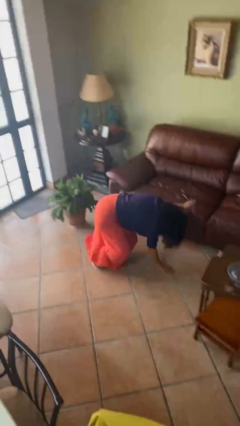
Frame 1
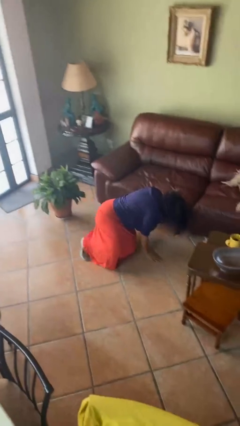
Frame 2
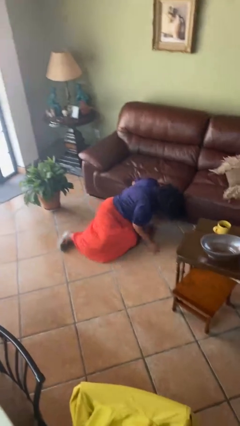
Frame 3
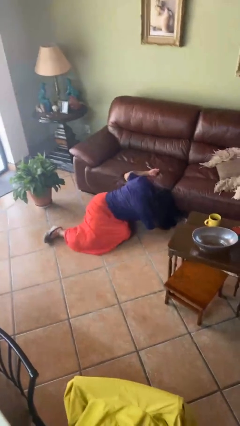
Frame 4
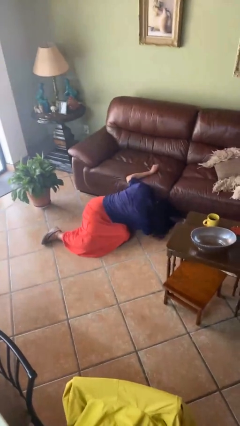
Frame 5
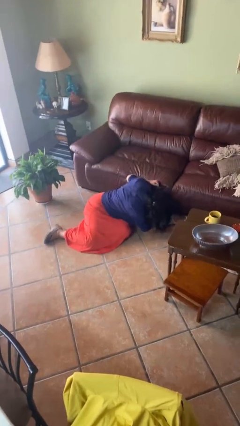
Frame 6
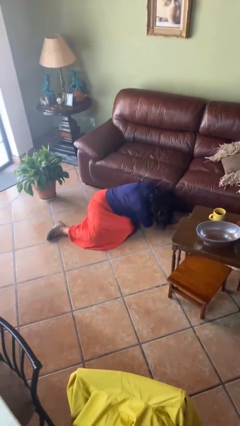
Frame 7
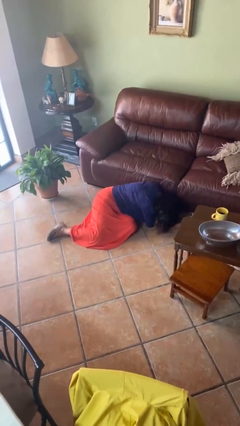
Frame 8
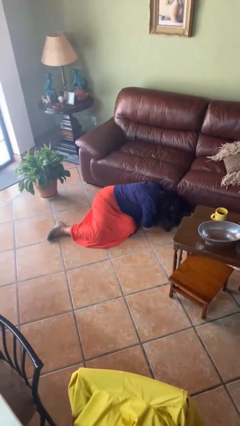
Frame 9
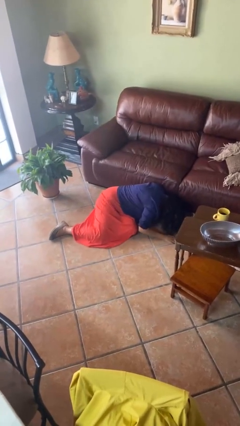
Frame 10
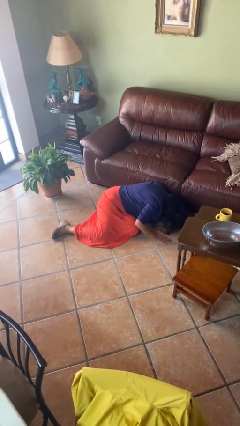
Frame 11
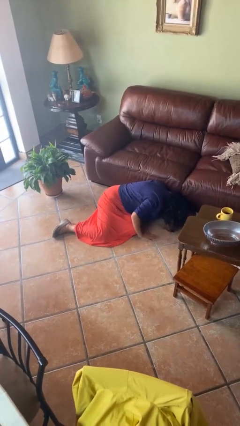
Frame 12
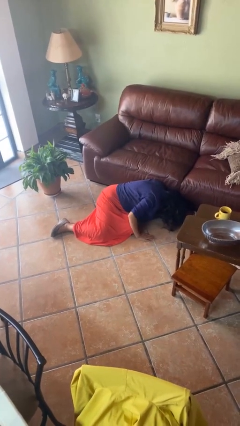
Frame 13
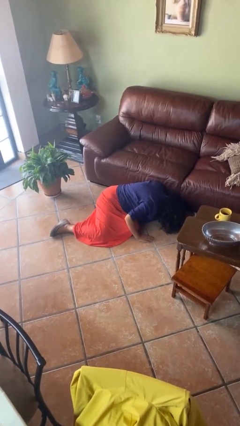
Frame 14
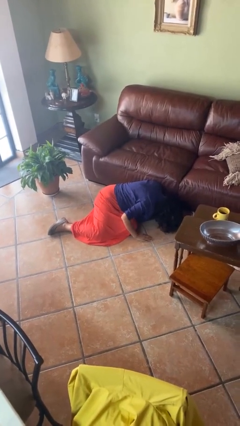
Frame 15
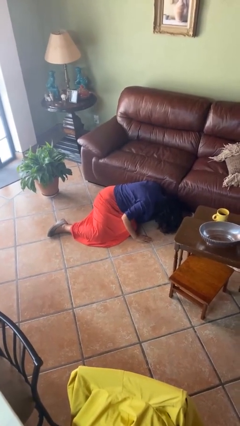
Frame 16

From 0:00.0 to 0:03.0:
person lies down on floor

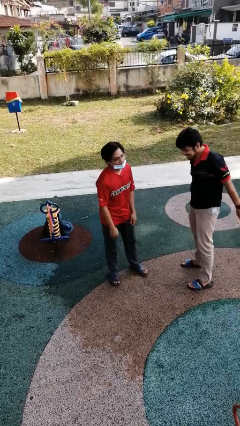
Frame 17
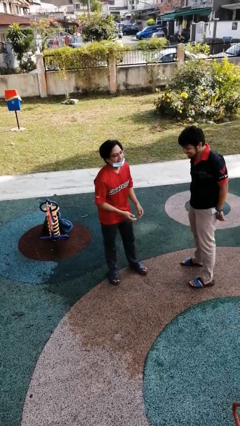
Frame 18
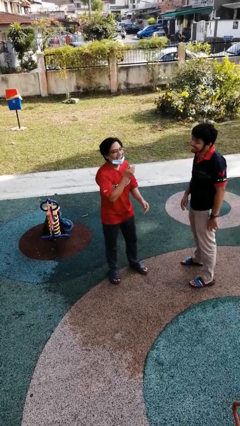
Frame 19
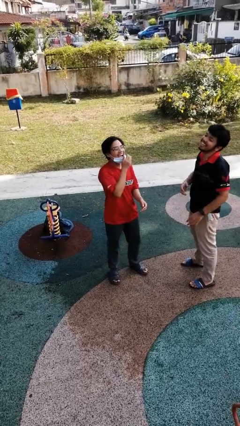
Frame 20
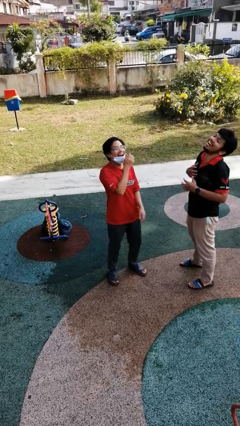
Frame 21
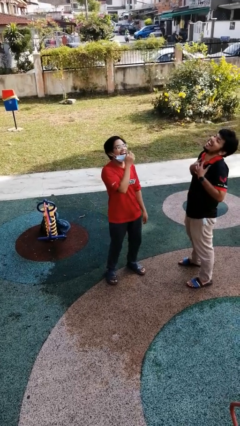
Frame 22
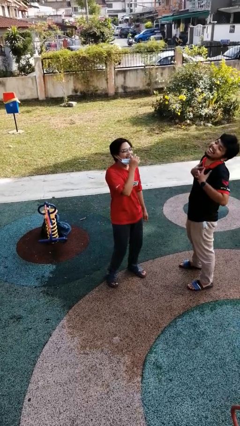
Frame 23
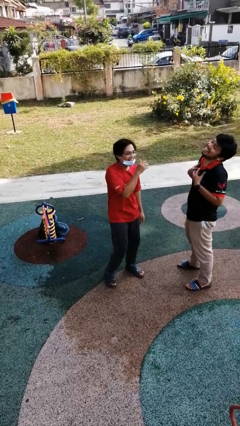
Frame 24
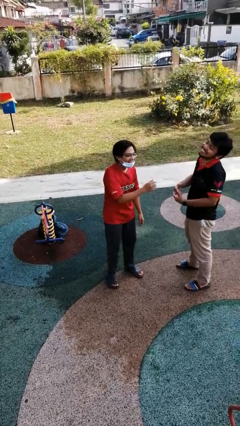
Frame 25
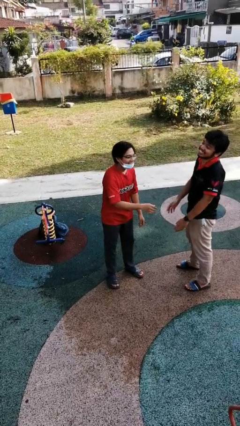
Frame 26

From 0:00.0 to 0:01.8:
person laughs with person

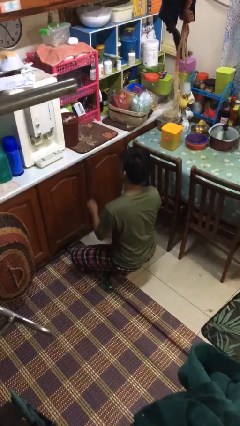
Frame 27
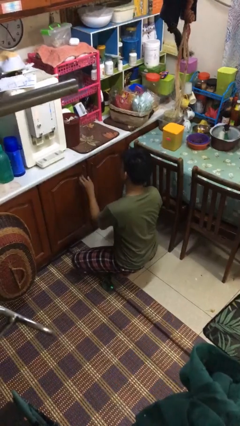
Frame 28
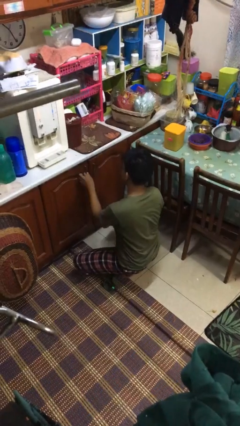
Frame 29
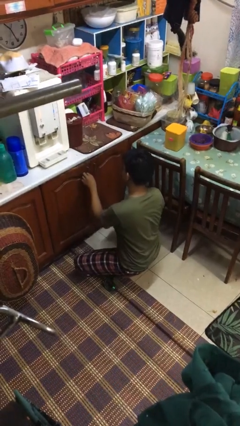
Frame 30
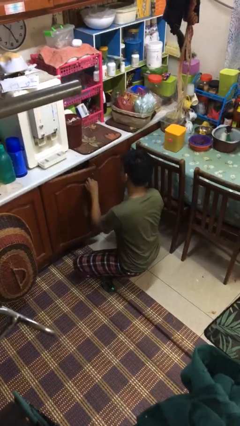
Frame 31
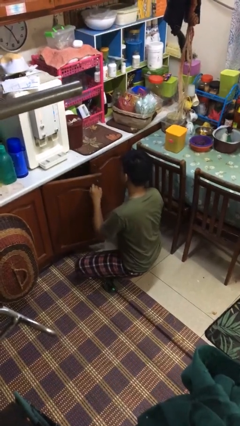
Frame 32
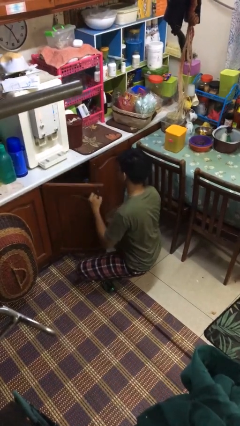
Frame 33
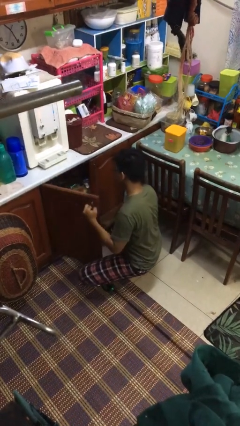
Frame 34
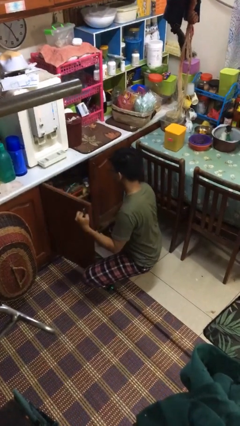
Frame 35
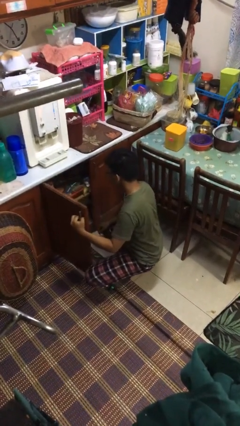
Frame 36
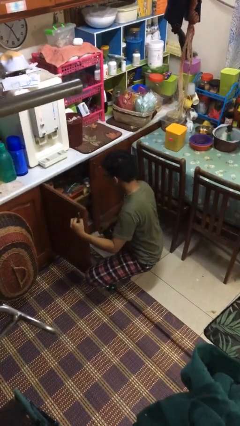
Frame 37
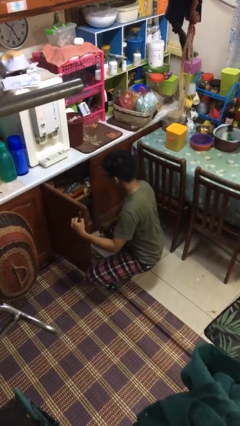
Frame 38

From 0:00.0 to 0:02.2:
person opens kitchen drawer

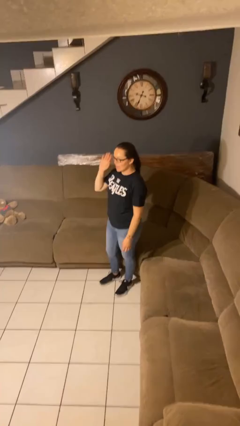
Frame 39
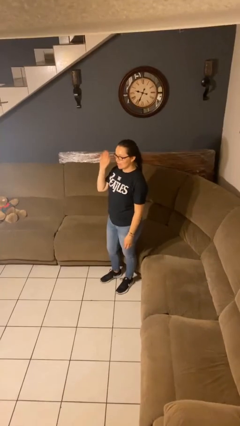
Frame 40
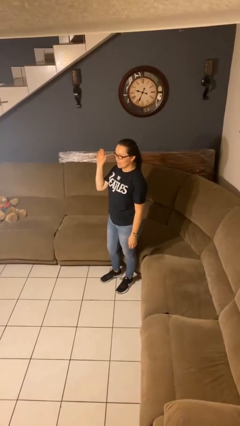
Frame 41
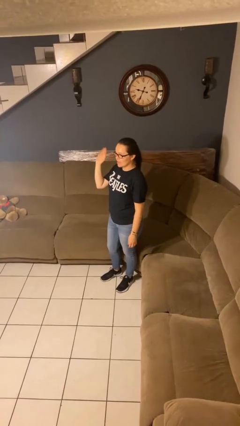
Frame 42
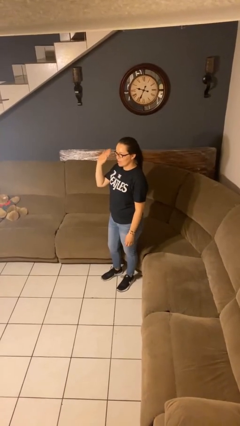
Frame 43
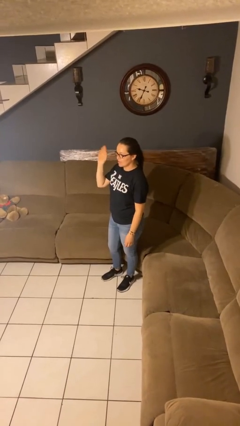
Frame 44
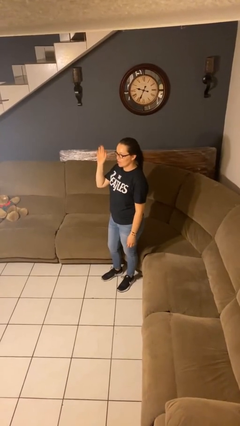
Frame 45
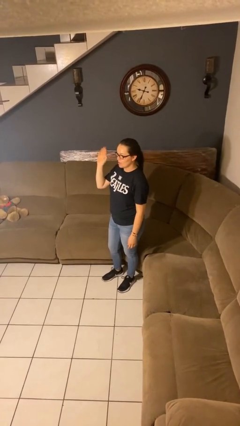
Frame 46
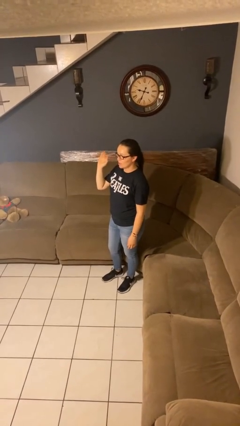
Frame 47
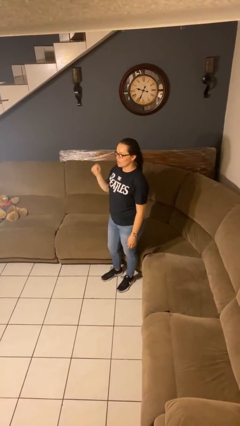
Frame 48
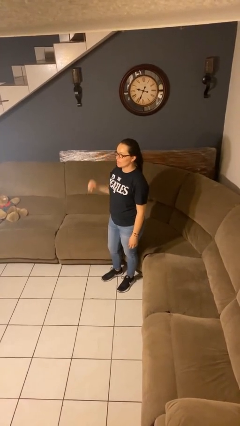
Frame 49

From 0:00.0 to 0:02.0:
person waves at person

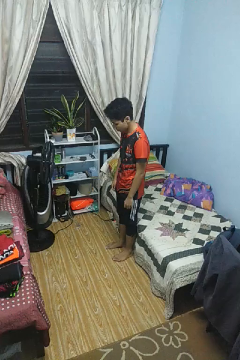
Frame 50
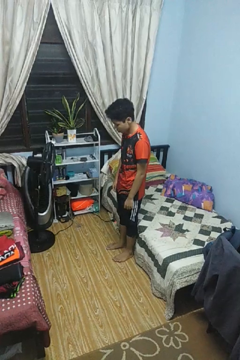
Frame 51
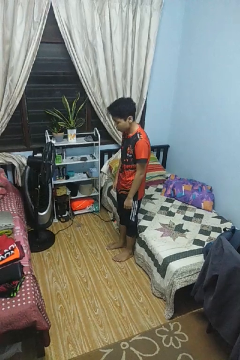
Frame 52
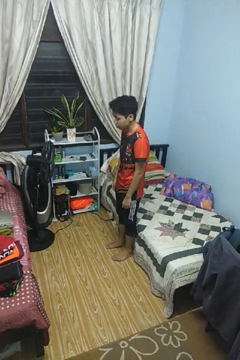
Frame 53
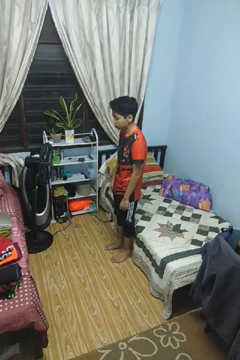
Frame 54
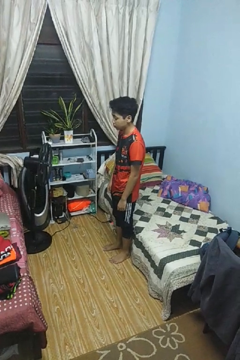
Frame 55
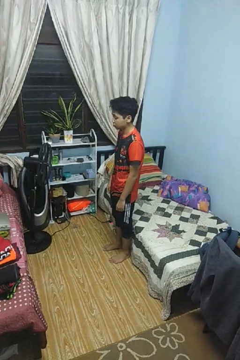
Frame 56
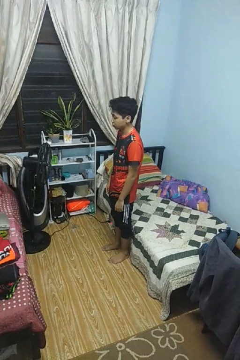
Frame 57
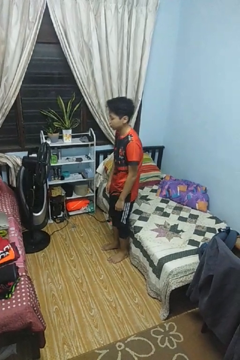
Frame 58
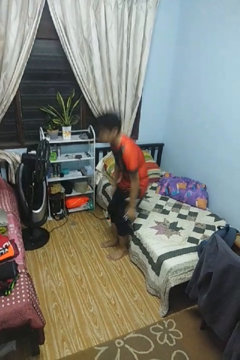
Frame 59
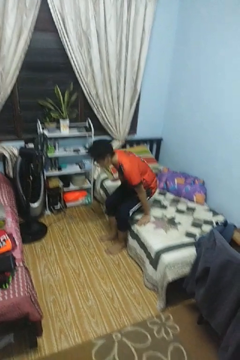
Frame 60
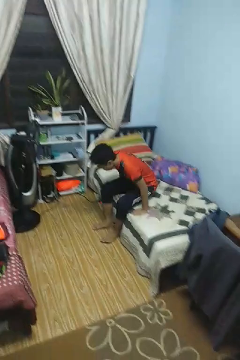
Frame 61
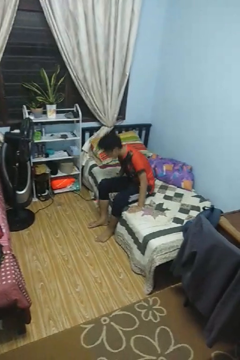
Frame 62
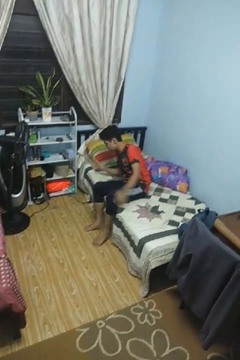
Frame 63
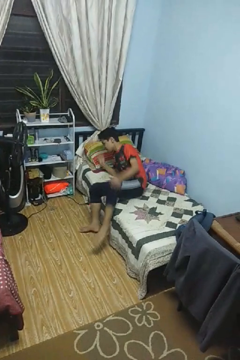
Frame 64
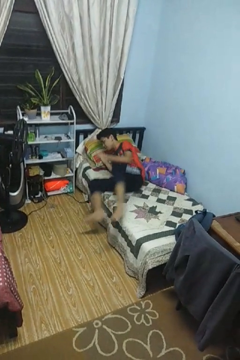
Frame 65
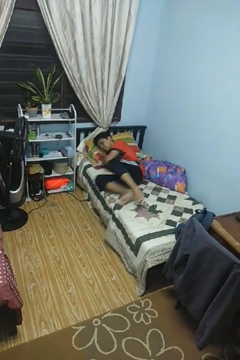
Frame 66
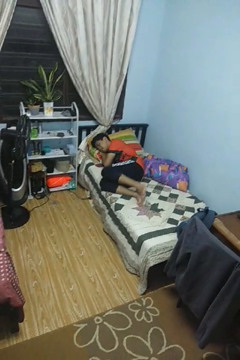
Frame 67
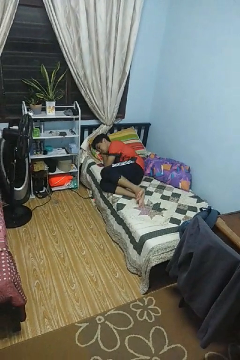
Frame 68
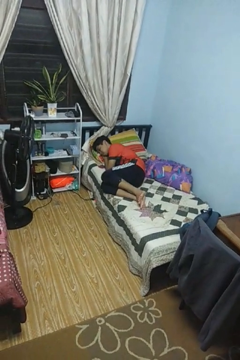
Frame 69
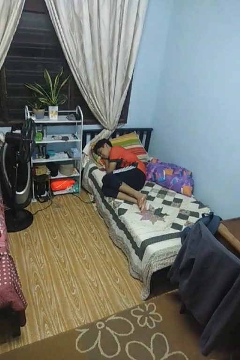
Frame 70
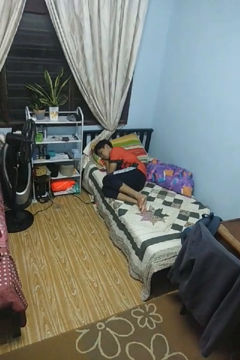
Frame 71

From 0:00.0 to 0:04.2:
person lies down on bed

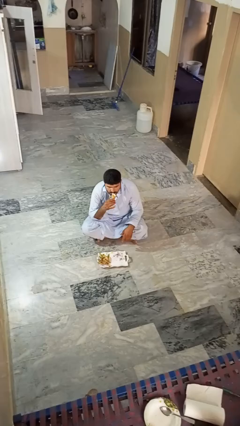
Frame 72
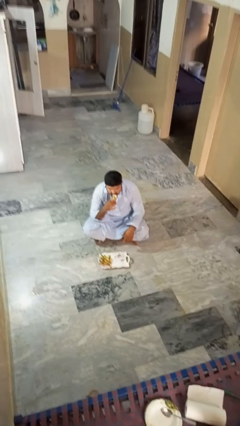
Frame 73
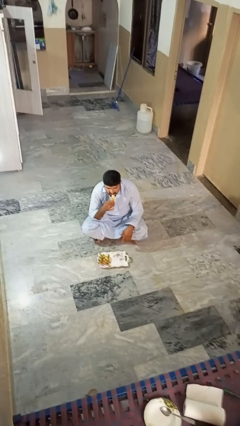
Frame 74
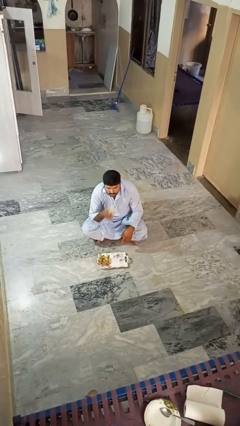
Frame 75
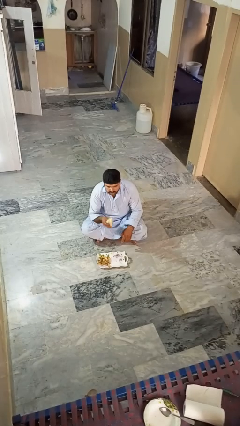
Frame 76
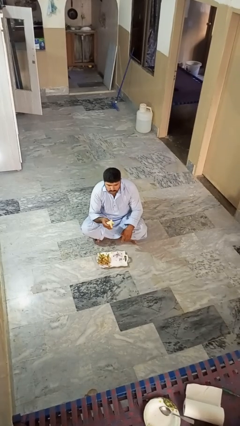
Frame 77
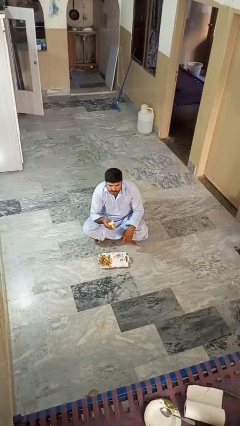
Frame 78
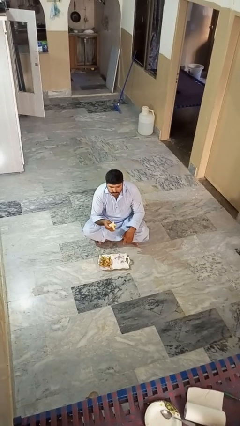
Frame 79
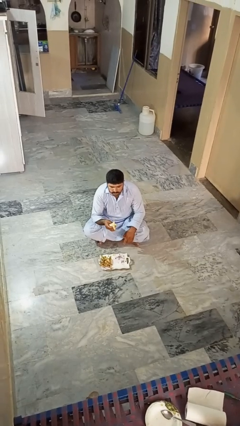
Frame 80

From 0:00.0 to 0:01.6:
person eats banana

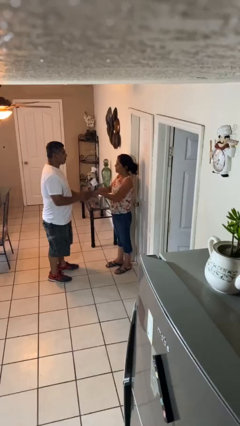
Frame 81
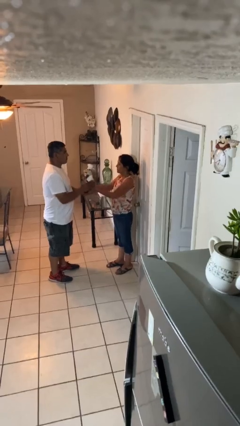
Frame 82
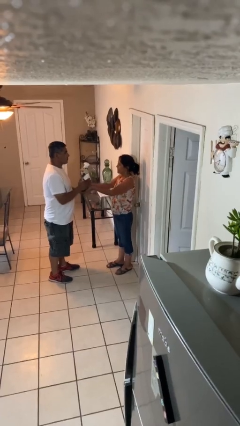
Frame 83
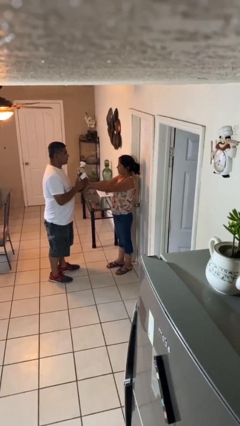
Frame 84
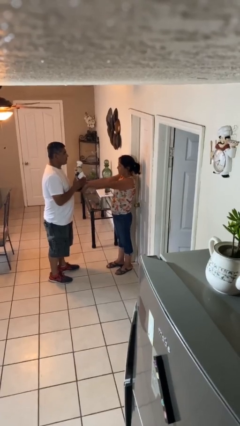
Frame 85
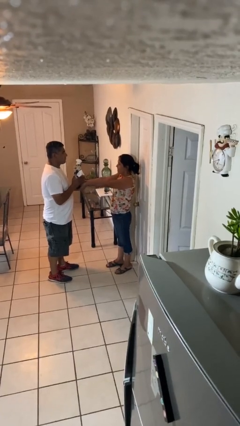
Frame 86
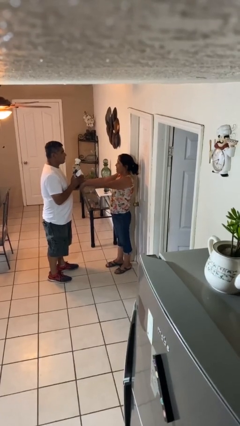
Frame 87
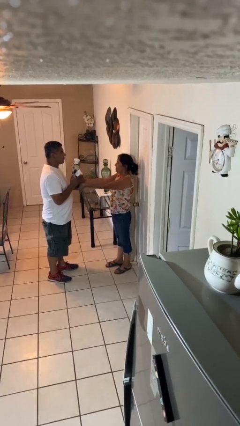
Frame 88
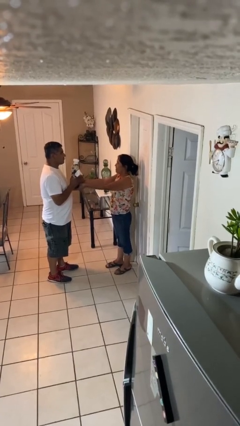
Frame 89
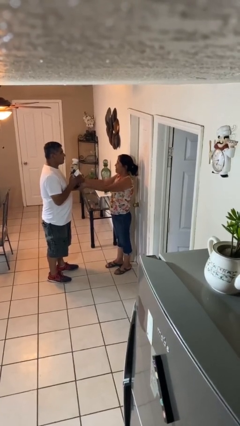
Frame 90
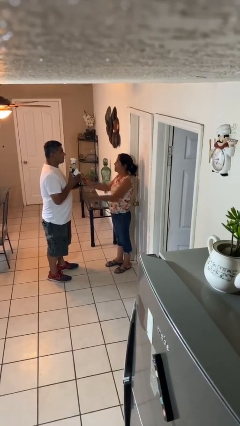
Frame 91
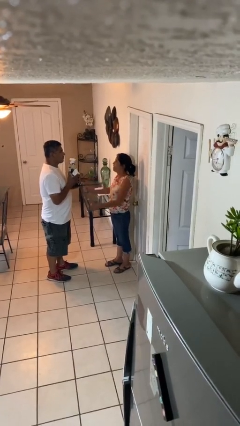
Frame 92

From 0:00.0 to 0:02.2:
person transfers object to person

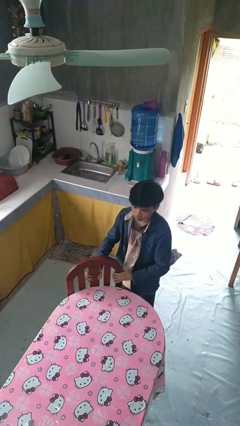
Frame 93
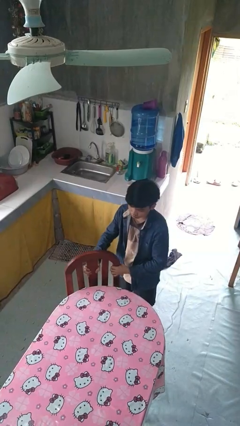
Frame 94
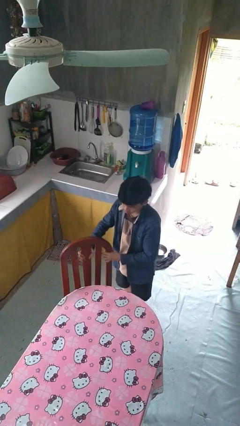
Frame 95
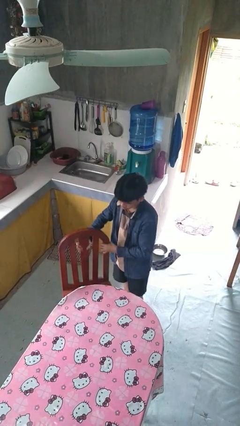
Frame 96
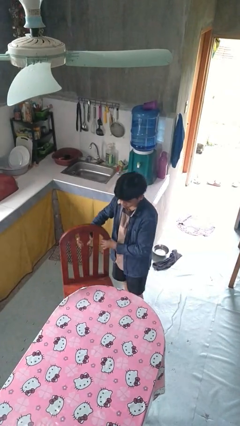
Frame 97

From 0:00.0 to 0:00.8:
person pulls out chair
